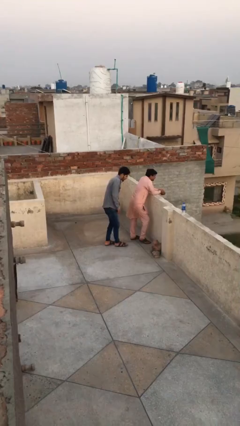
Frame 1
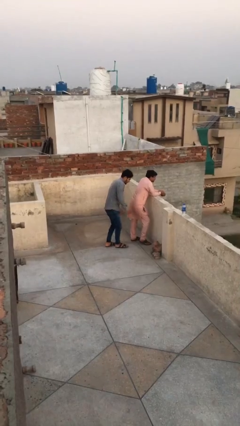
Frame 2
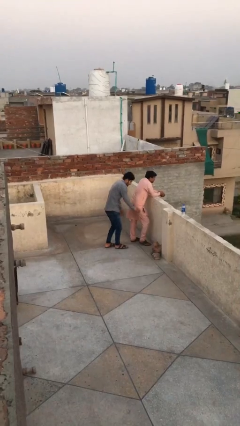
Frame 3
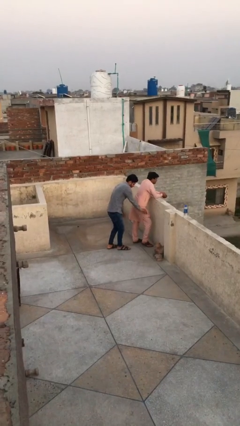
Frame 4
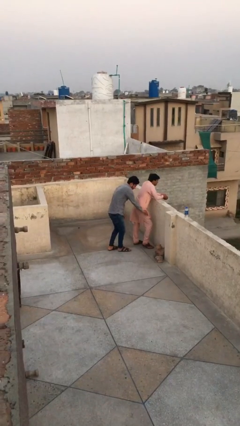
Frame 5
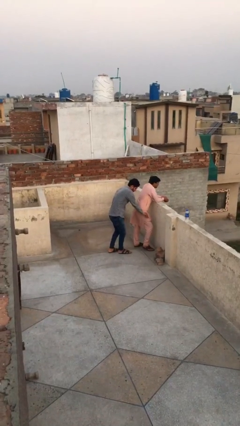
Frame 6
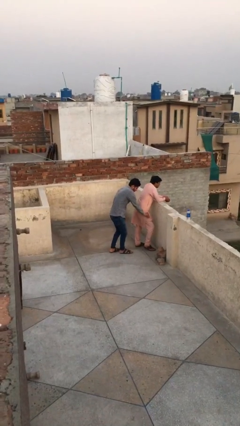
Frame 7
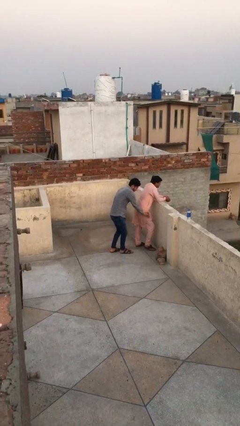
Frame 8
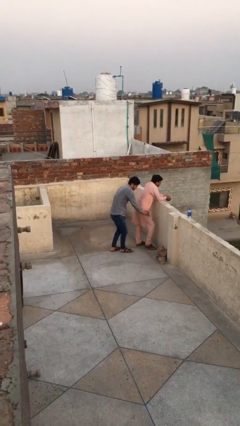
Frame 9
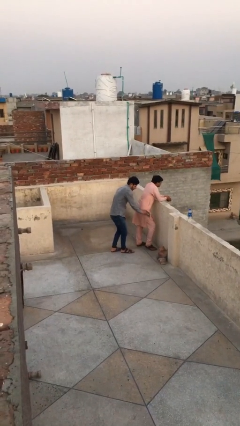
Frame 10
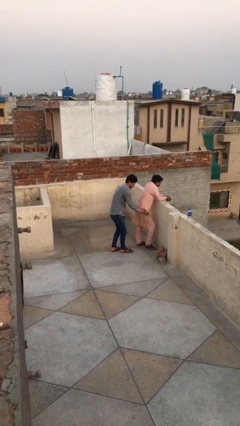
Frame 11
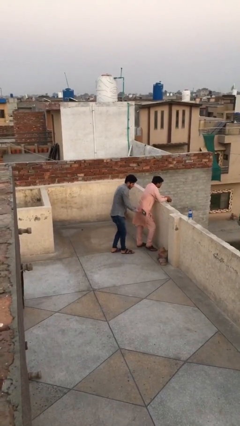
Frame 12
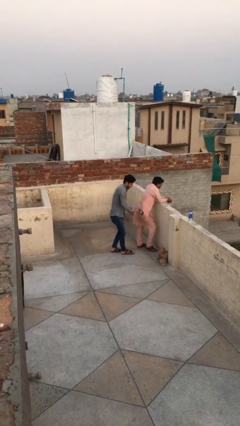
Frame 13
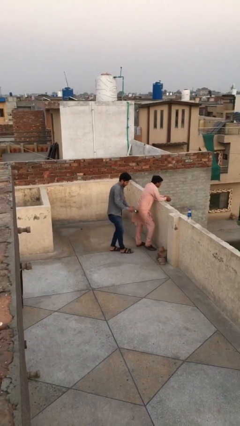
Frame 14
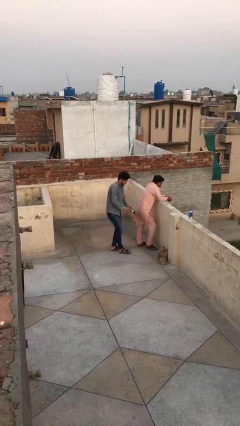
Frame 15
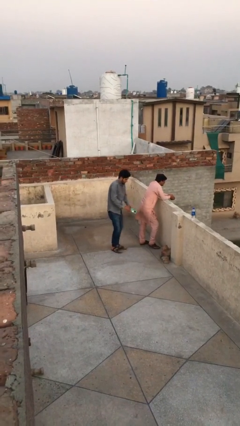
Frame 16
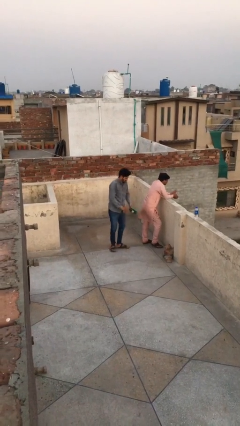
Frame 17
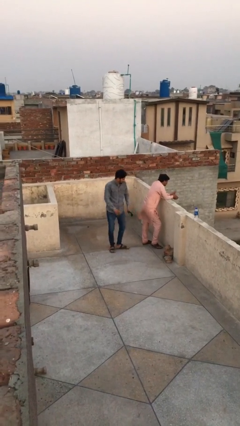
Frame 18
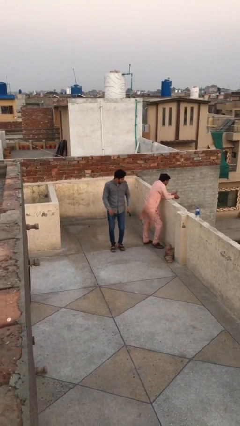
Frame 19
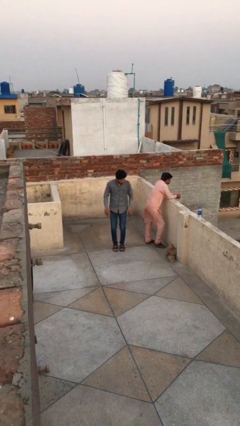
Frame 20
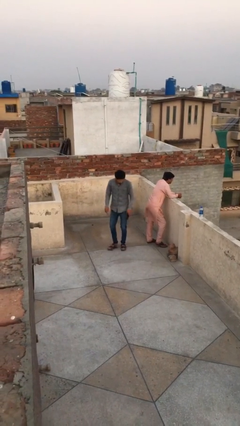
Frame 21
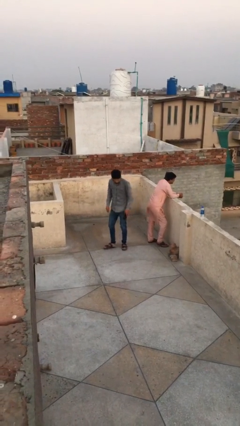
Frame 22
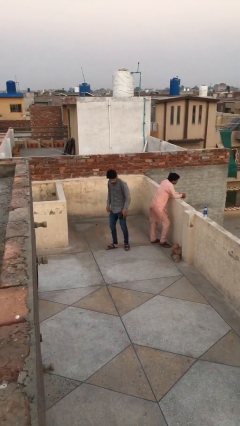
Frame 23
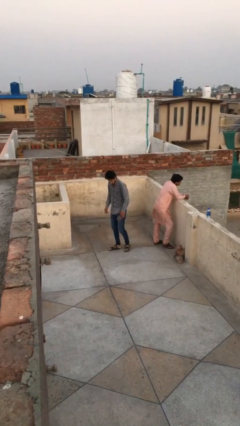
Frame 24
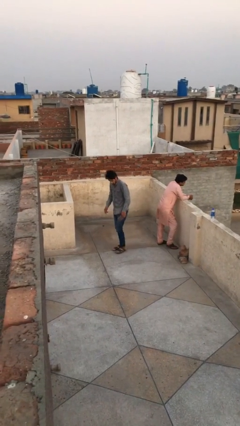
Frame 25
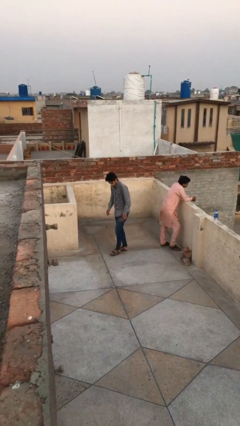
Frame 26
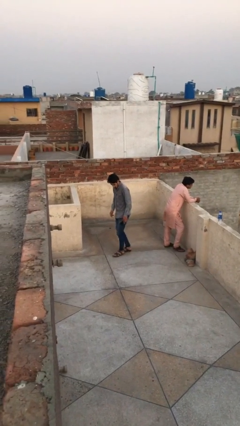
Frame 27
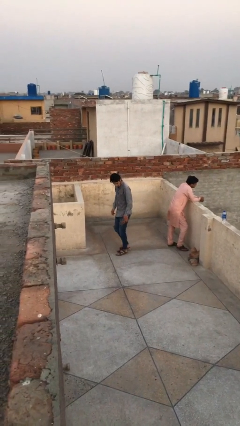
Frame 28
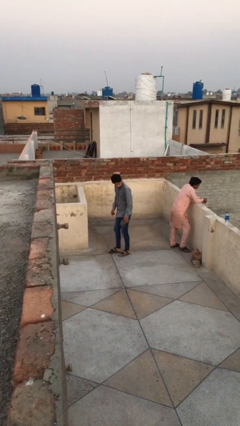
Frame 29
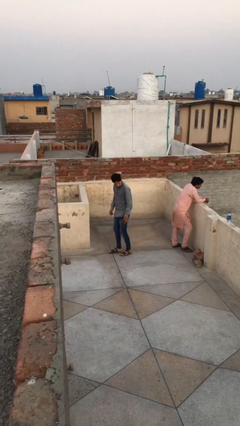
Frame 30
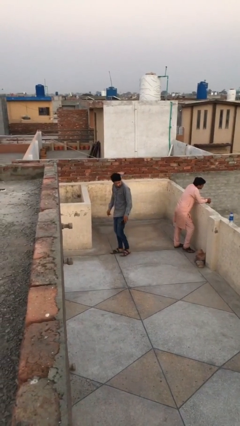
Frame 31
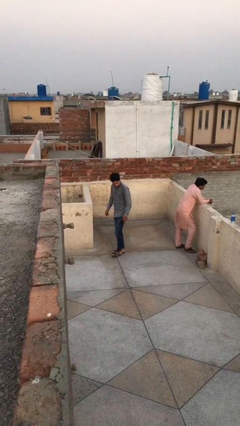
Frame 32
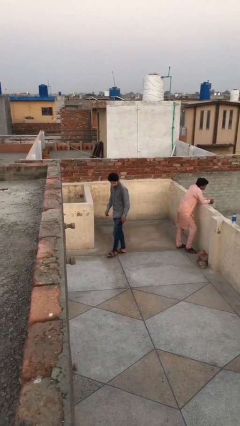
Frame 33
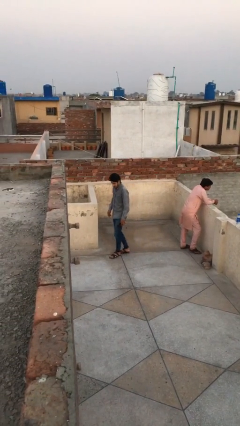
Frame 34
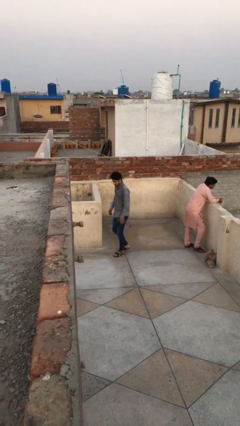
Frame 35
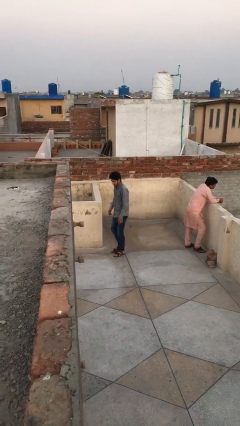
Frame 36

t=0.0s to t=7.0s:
person steals object from person

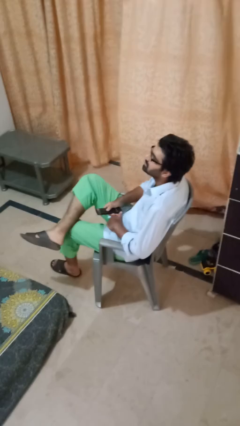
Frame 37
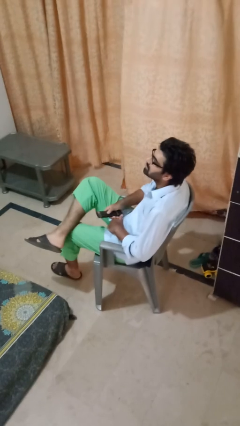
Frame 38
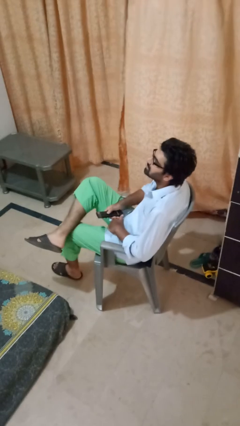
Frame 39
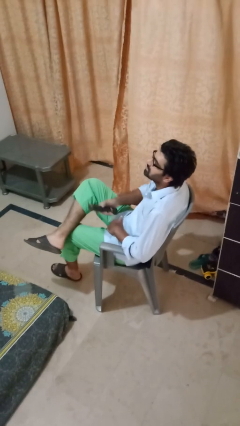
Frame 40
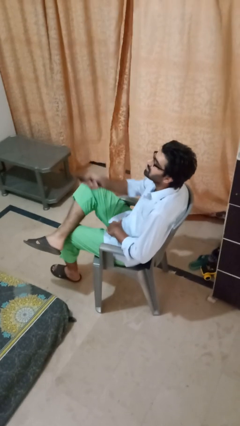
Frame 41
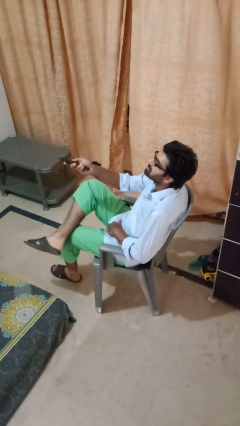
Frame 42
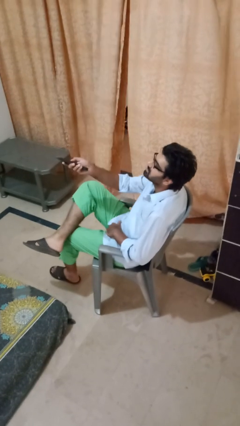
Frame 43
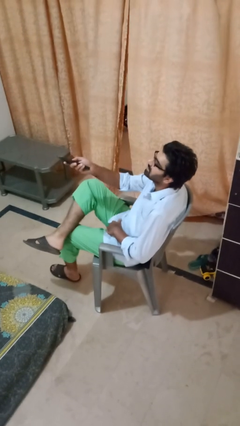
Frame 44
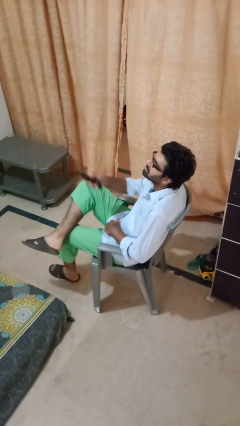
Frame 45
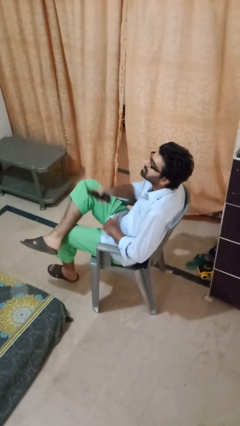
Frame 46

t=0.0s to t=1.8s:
person uses television remote

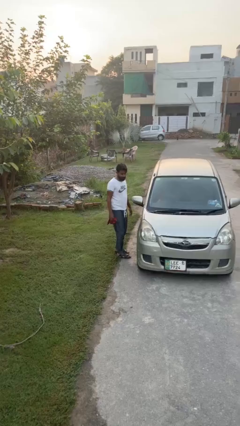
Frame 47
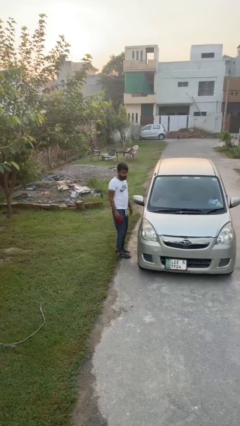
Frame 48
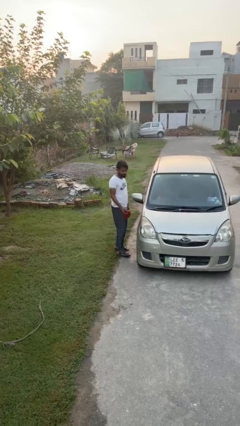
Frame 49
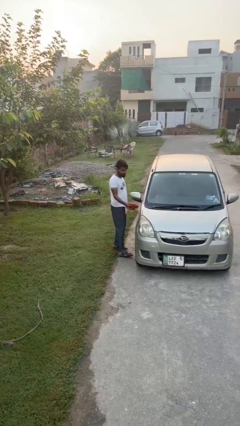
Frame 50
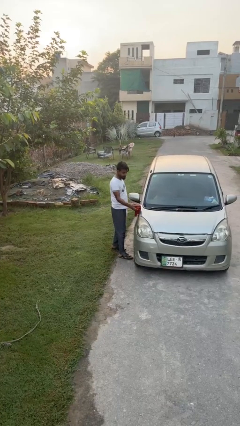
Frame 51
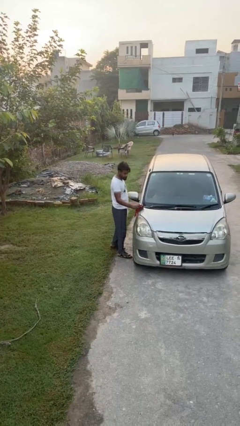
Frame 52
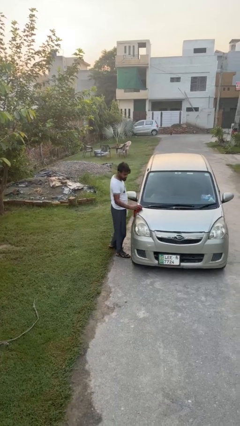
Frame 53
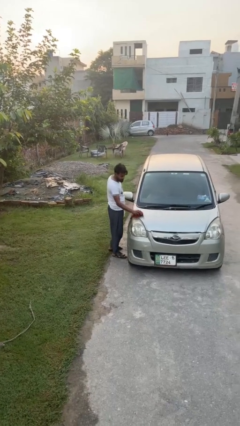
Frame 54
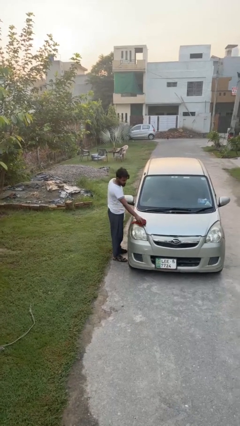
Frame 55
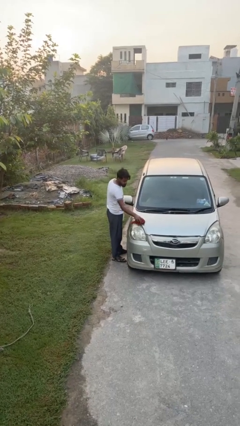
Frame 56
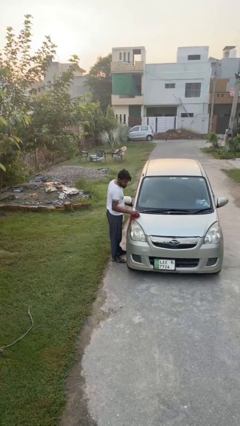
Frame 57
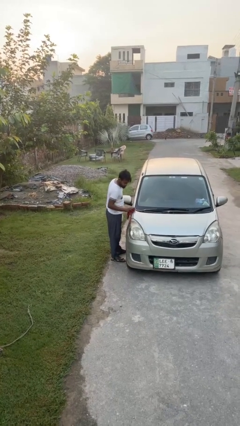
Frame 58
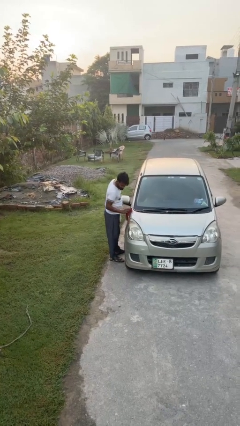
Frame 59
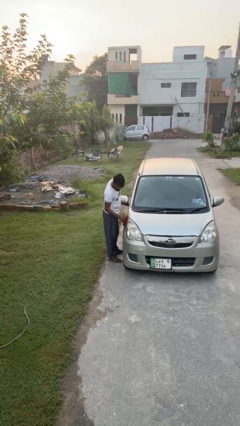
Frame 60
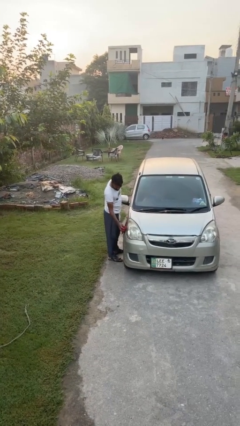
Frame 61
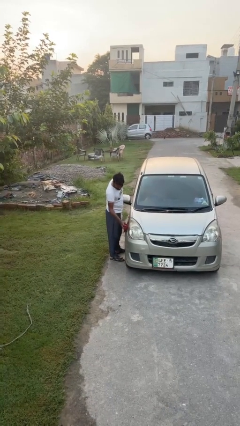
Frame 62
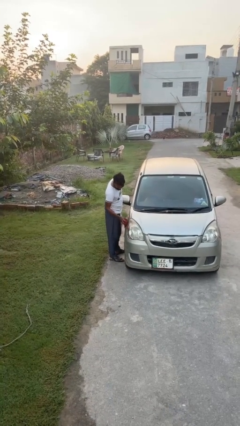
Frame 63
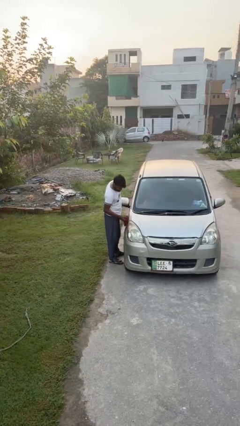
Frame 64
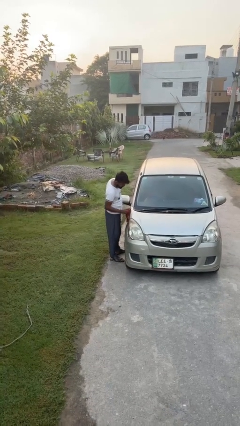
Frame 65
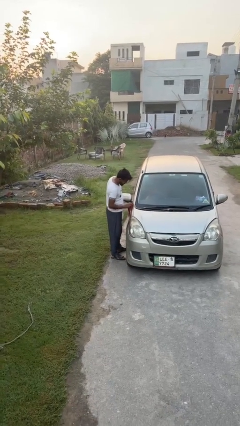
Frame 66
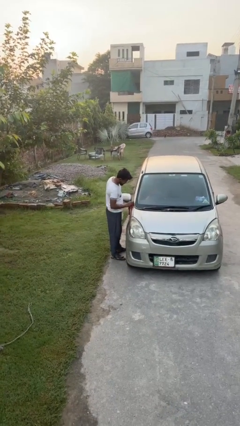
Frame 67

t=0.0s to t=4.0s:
person polishes car with rag

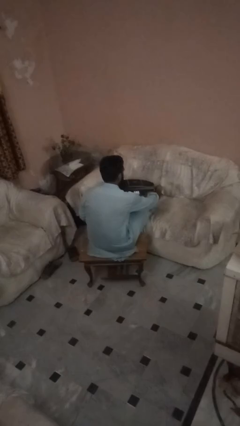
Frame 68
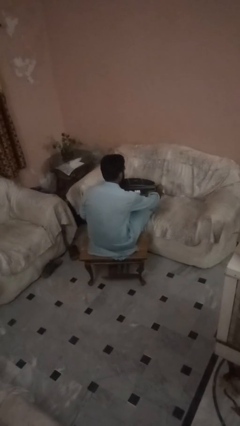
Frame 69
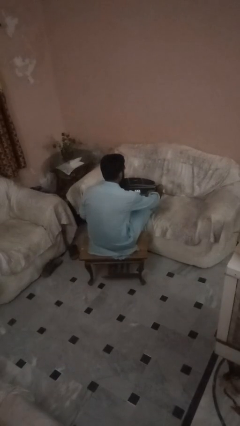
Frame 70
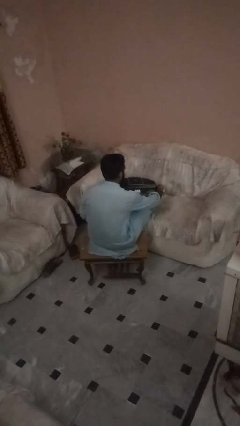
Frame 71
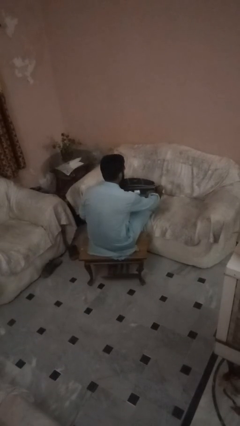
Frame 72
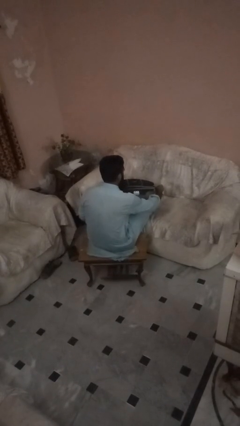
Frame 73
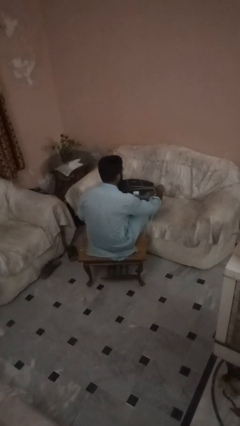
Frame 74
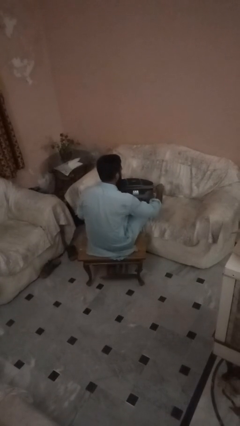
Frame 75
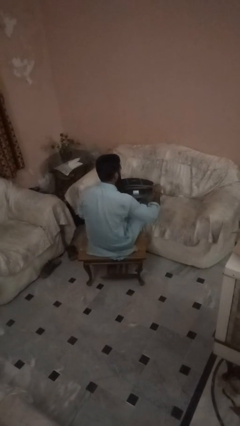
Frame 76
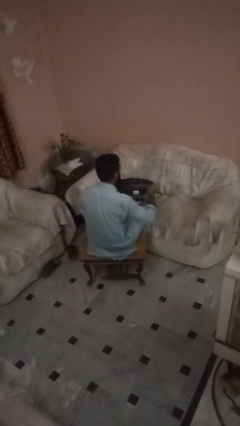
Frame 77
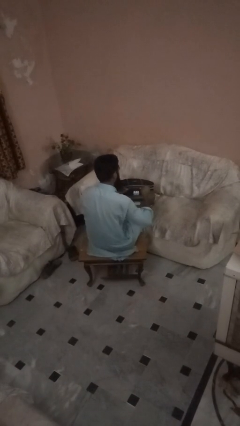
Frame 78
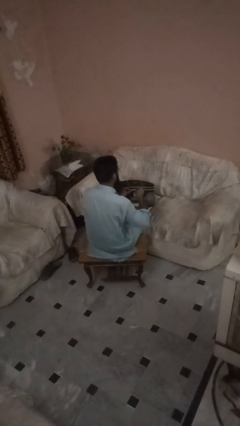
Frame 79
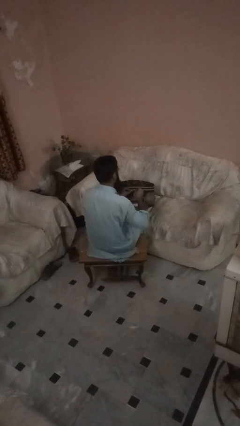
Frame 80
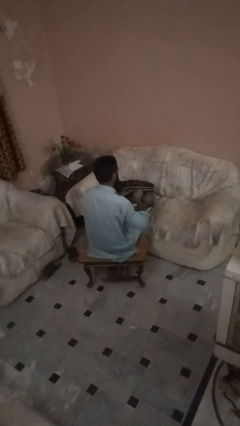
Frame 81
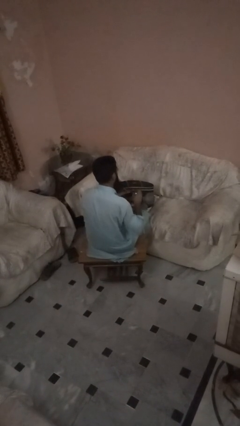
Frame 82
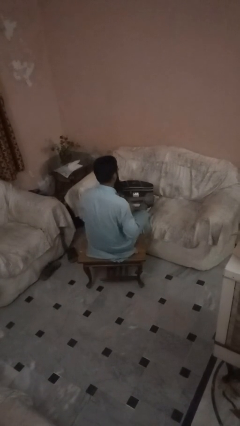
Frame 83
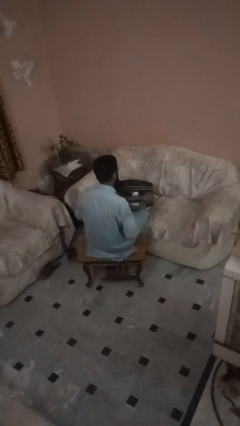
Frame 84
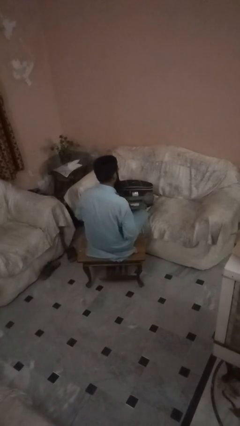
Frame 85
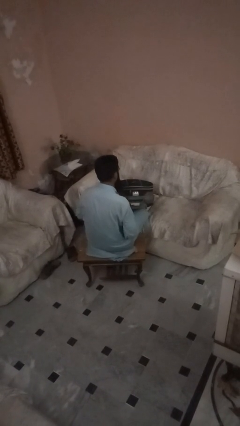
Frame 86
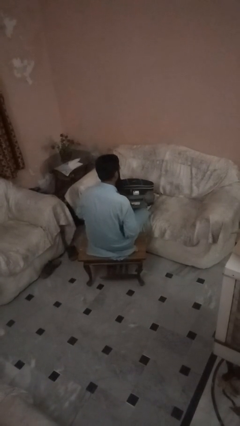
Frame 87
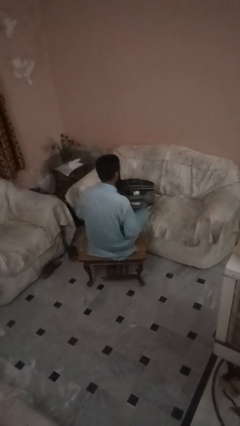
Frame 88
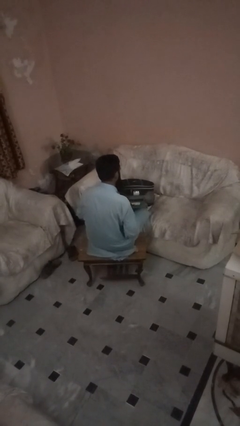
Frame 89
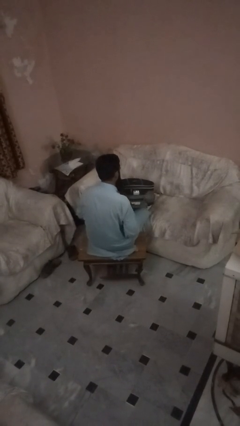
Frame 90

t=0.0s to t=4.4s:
person closes suitcase

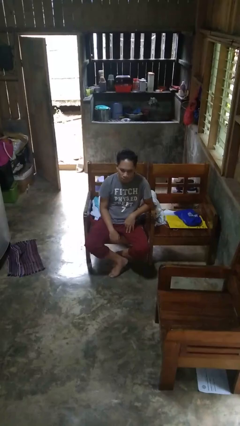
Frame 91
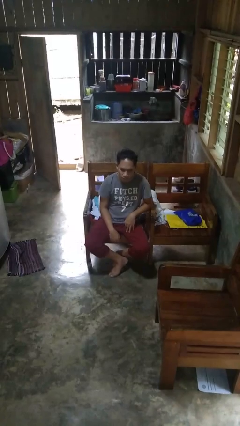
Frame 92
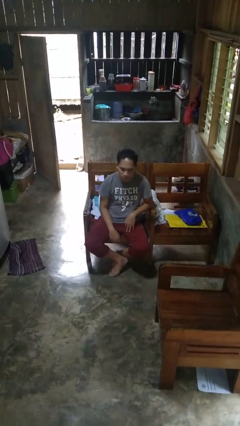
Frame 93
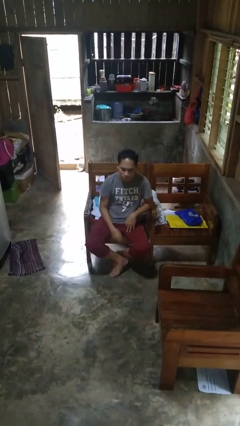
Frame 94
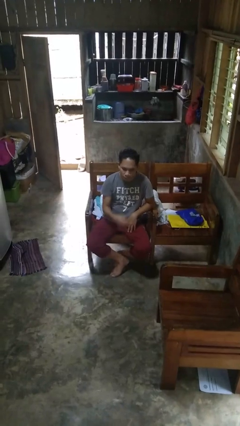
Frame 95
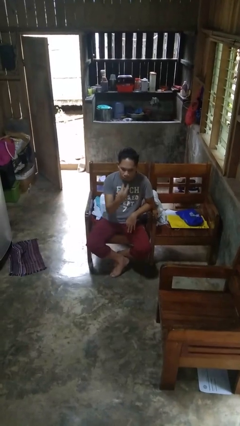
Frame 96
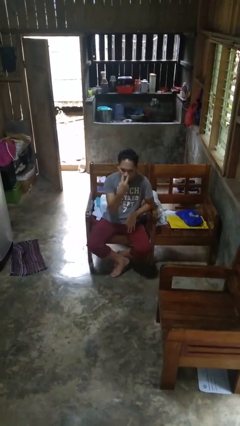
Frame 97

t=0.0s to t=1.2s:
person gestures watch closely
